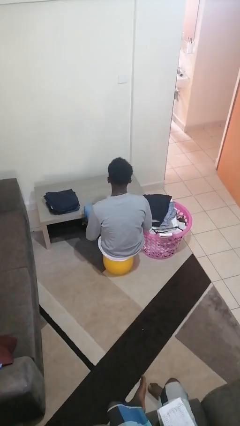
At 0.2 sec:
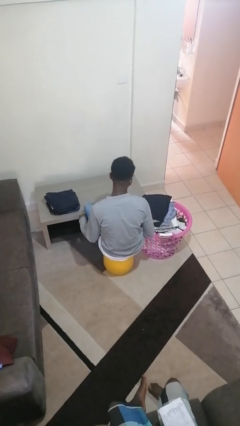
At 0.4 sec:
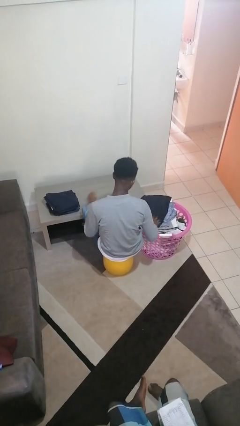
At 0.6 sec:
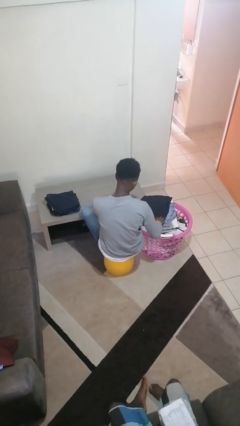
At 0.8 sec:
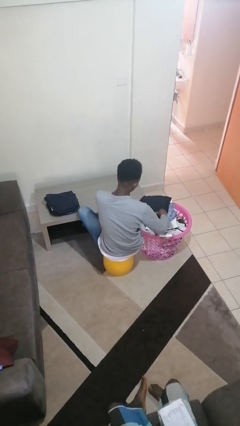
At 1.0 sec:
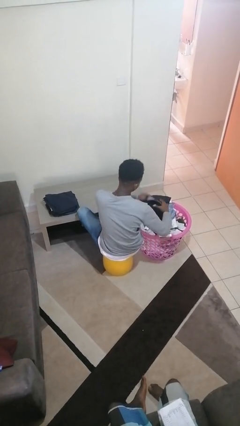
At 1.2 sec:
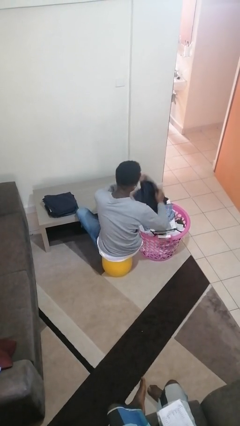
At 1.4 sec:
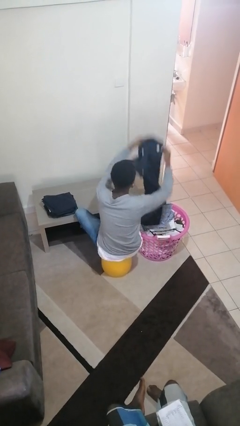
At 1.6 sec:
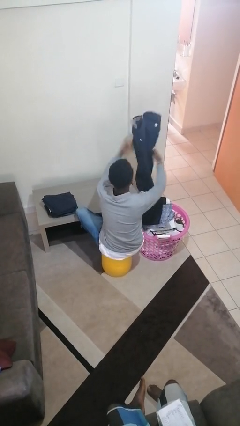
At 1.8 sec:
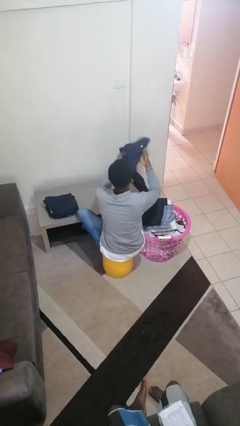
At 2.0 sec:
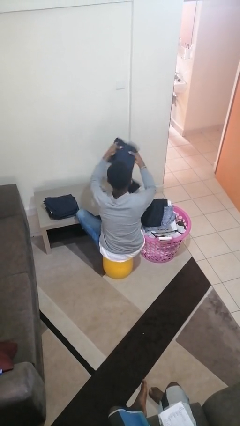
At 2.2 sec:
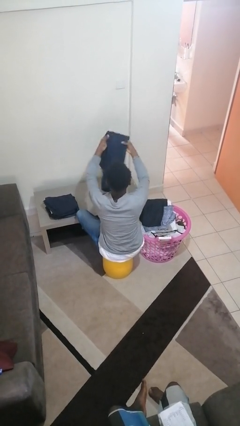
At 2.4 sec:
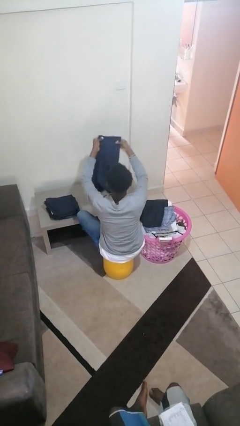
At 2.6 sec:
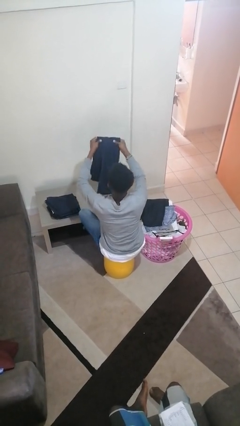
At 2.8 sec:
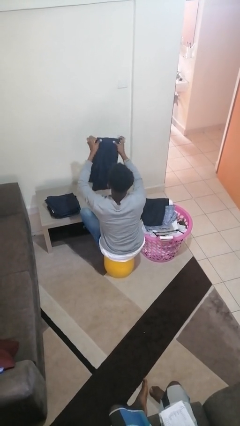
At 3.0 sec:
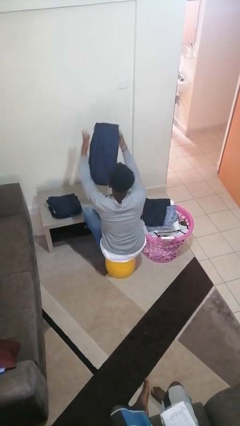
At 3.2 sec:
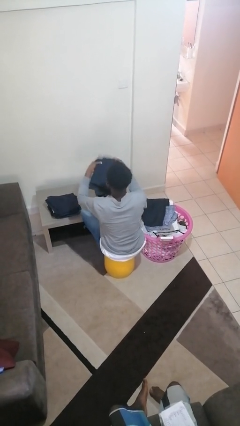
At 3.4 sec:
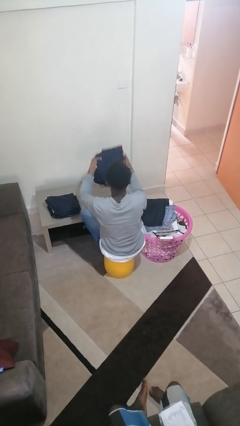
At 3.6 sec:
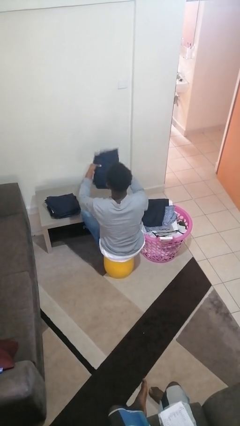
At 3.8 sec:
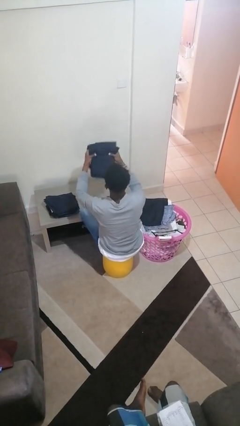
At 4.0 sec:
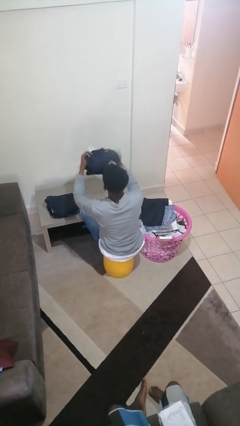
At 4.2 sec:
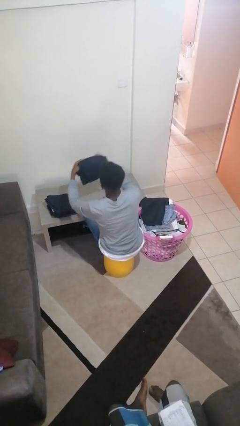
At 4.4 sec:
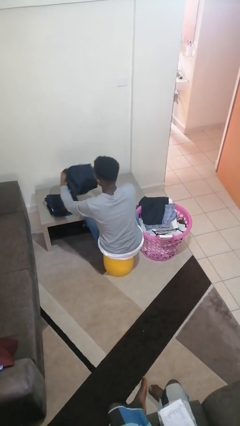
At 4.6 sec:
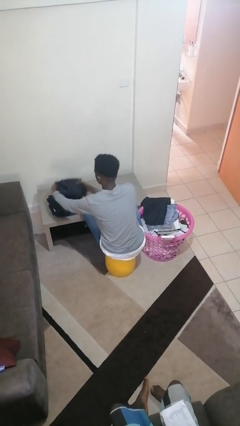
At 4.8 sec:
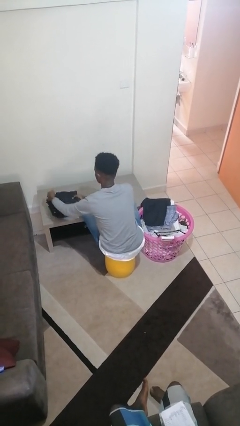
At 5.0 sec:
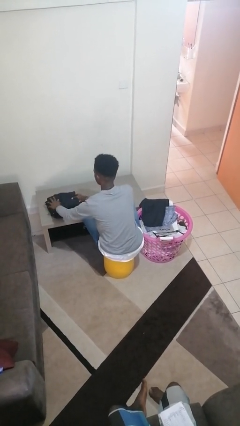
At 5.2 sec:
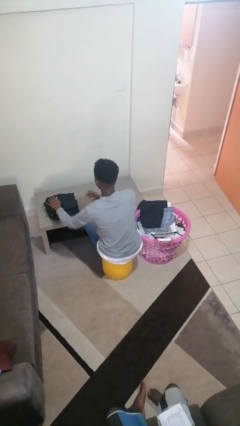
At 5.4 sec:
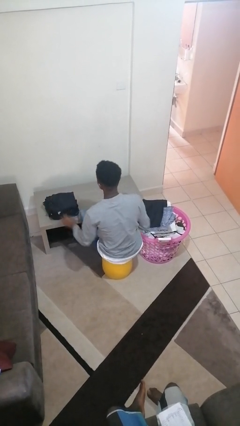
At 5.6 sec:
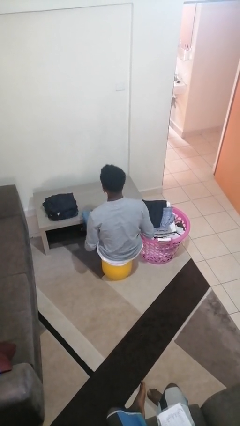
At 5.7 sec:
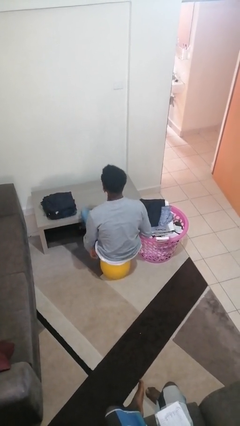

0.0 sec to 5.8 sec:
person folds pants

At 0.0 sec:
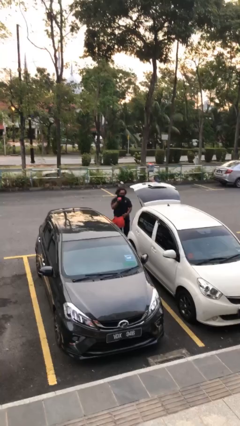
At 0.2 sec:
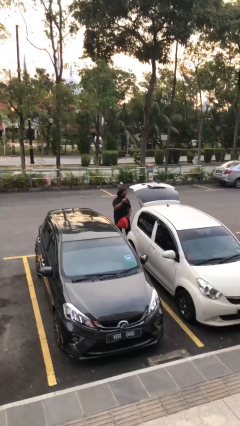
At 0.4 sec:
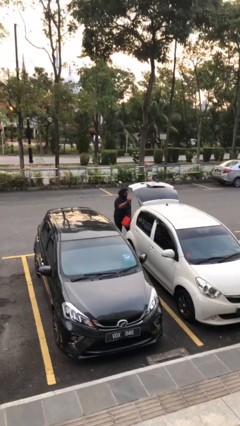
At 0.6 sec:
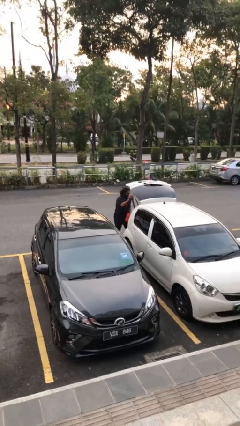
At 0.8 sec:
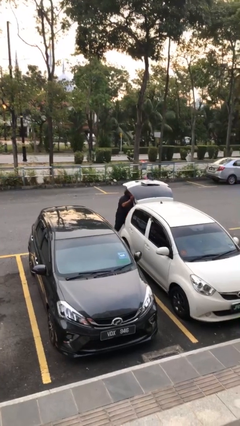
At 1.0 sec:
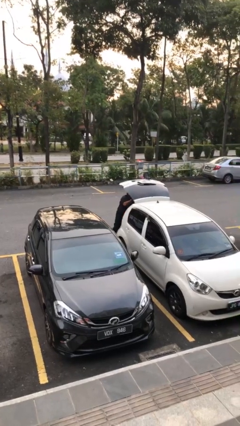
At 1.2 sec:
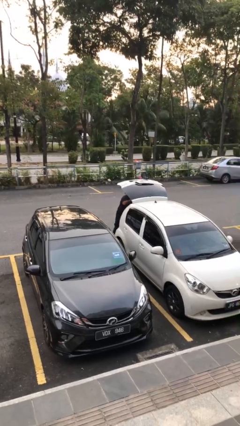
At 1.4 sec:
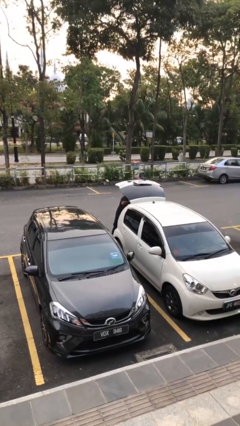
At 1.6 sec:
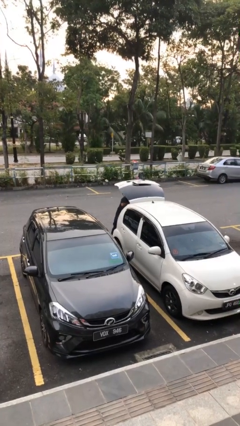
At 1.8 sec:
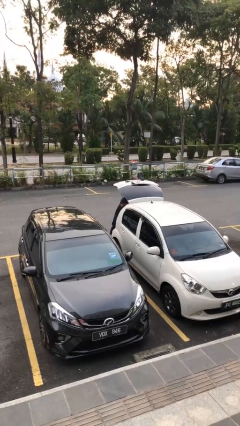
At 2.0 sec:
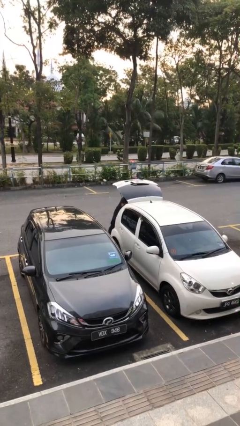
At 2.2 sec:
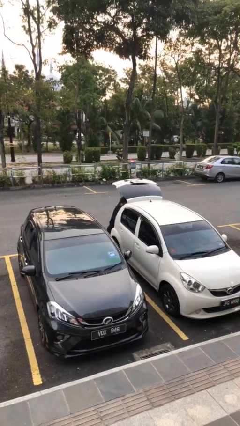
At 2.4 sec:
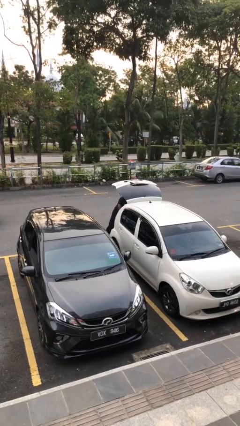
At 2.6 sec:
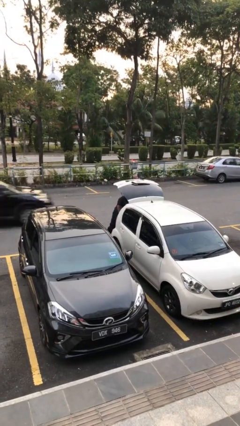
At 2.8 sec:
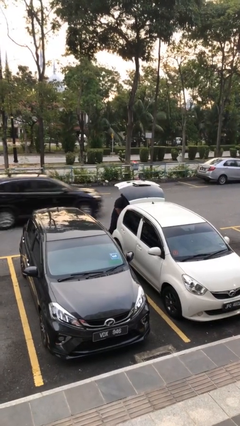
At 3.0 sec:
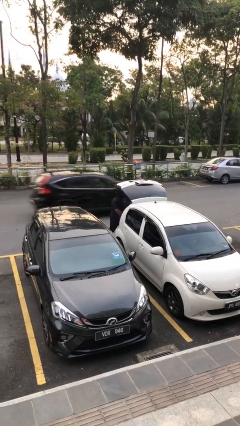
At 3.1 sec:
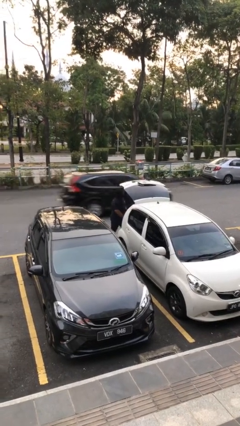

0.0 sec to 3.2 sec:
person loads car

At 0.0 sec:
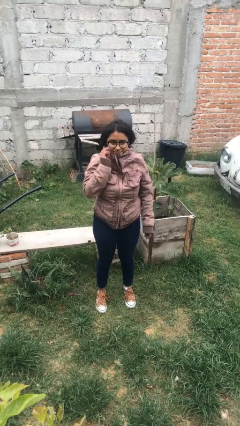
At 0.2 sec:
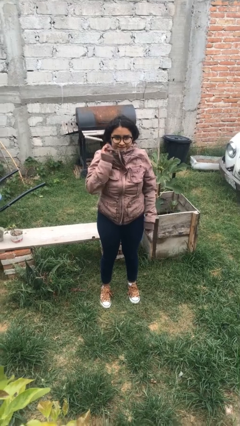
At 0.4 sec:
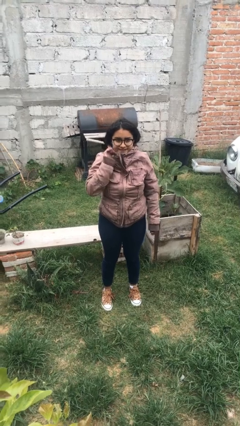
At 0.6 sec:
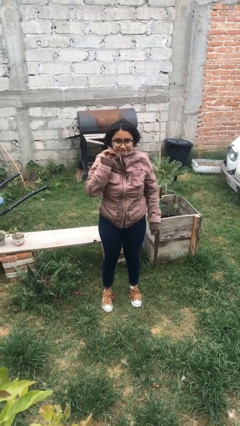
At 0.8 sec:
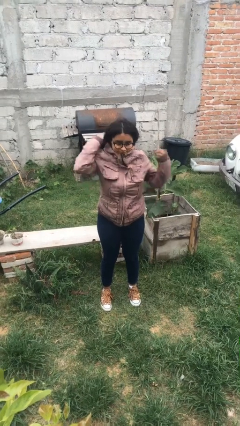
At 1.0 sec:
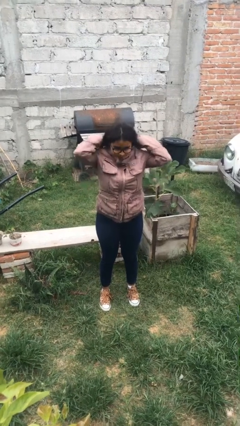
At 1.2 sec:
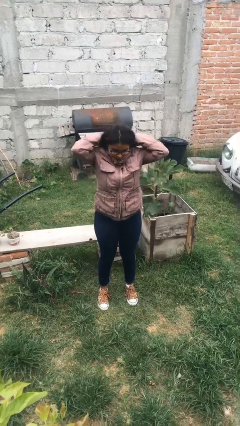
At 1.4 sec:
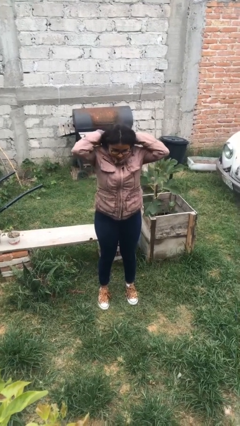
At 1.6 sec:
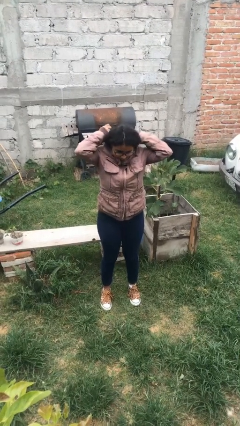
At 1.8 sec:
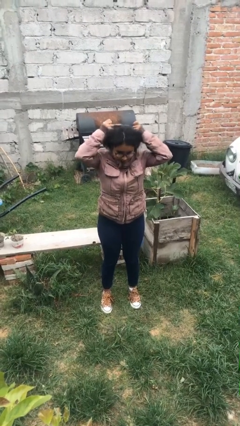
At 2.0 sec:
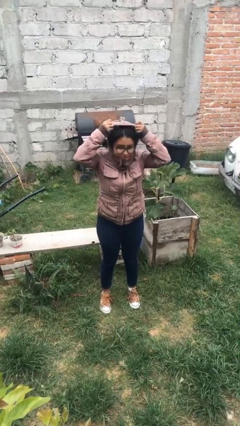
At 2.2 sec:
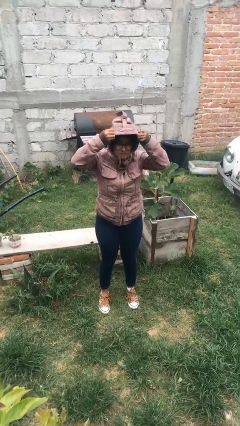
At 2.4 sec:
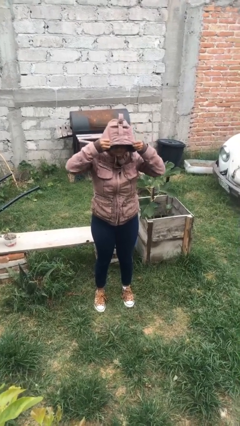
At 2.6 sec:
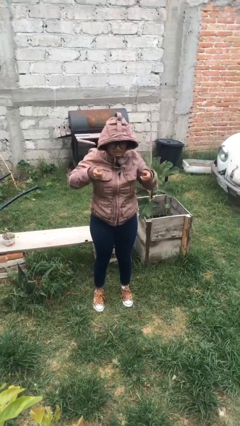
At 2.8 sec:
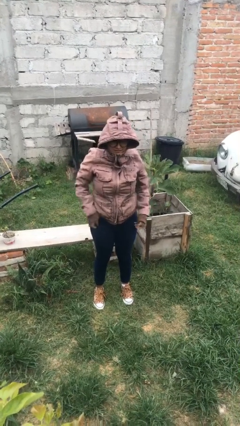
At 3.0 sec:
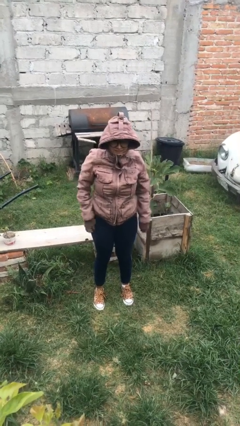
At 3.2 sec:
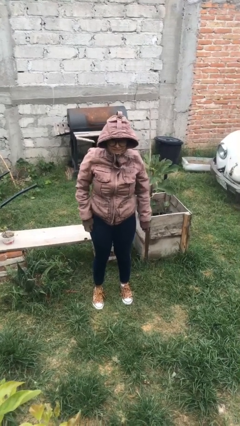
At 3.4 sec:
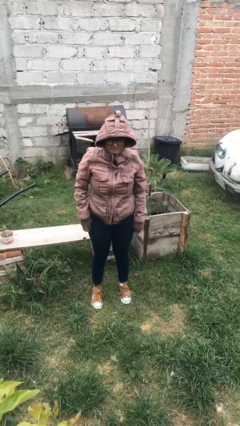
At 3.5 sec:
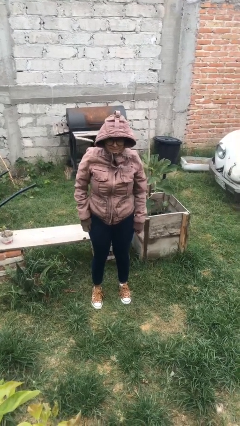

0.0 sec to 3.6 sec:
person puts on hoodie

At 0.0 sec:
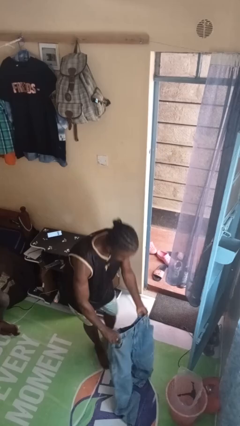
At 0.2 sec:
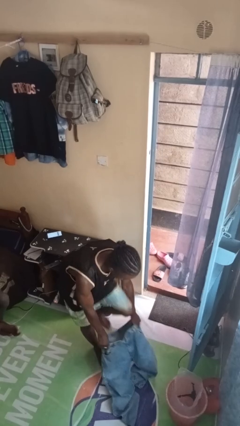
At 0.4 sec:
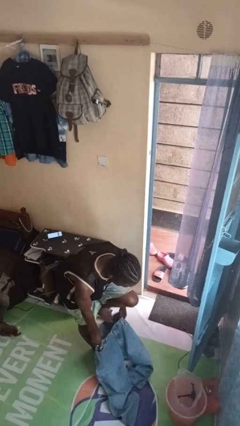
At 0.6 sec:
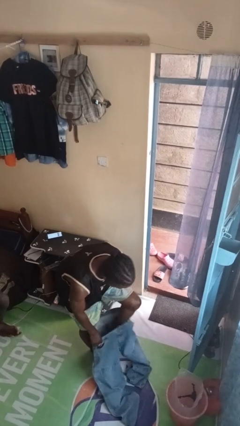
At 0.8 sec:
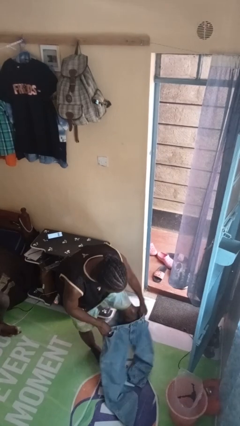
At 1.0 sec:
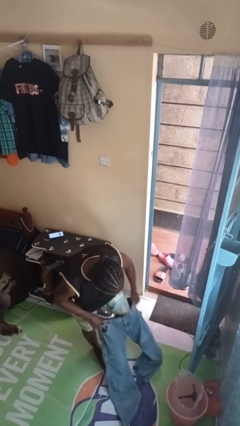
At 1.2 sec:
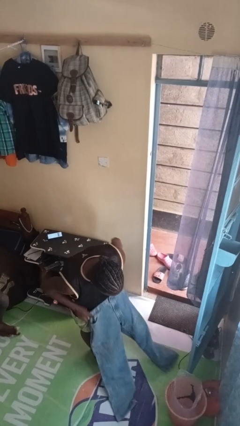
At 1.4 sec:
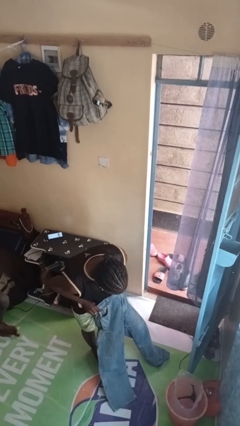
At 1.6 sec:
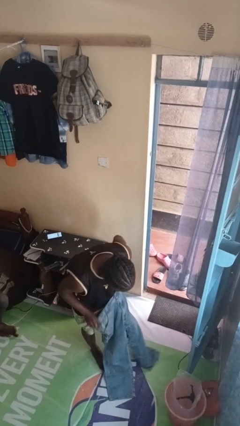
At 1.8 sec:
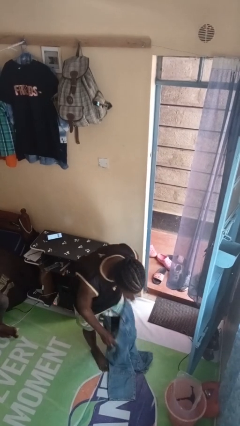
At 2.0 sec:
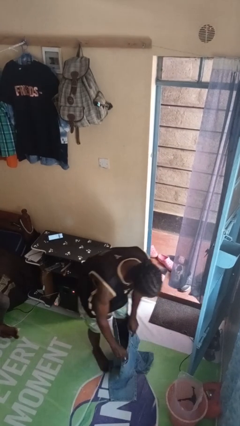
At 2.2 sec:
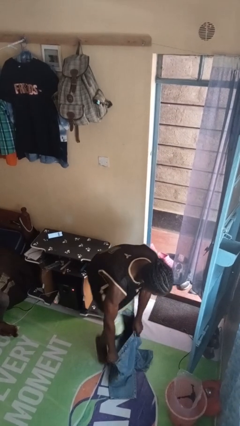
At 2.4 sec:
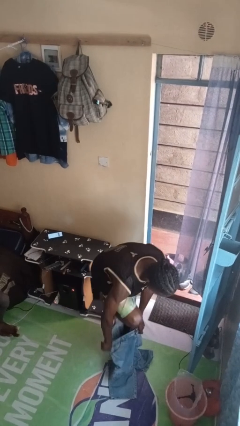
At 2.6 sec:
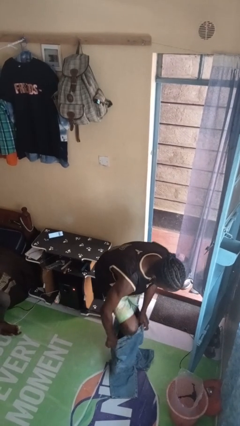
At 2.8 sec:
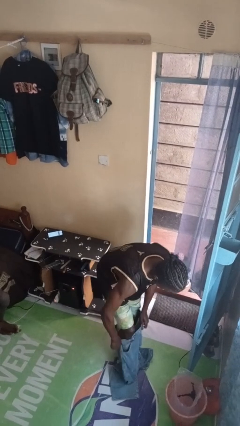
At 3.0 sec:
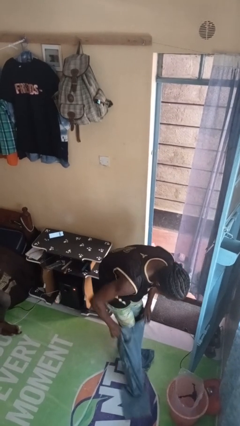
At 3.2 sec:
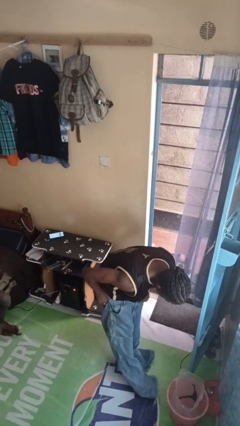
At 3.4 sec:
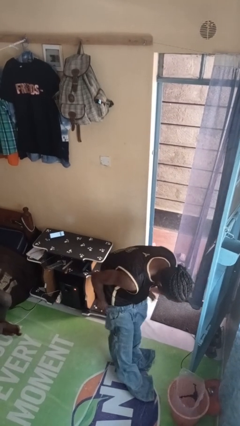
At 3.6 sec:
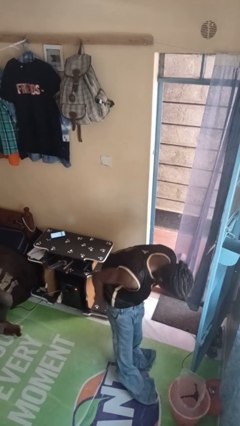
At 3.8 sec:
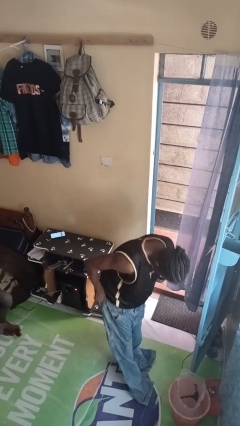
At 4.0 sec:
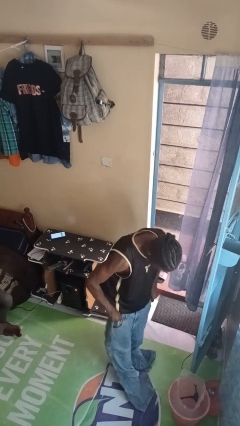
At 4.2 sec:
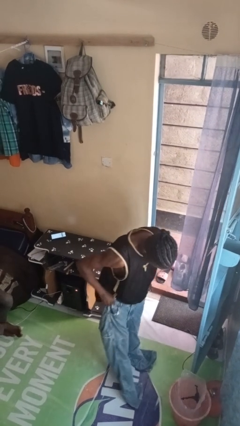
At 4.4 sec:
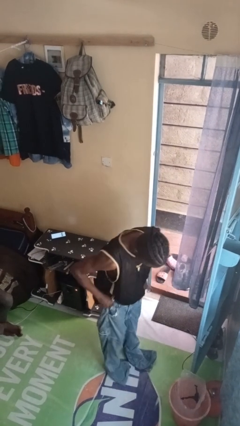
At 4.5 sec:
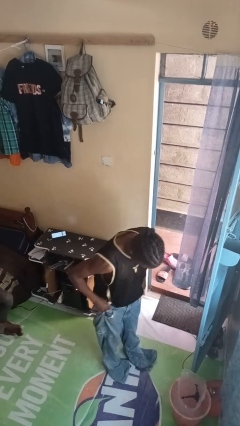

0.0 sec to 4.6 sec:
person puts on pants

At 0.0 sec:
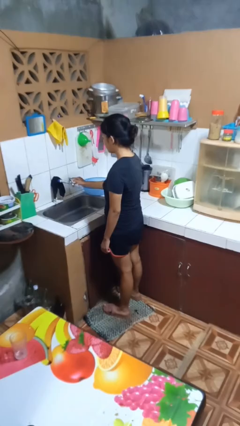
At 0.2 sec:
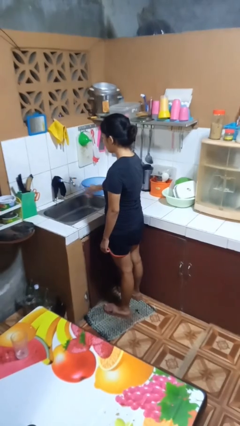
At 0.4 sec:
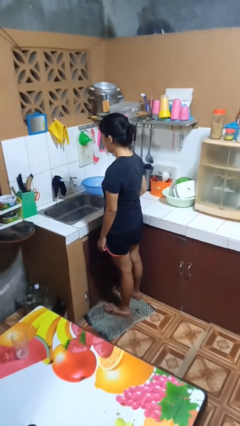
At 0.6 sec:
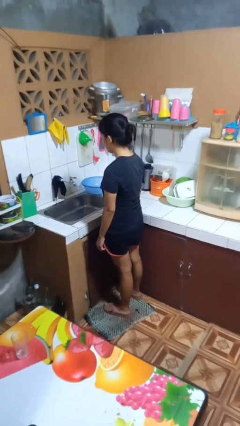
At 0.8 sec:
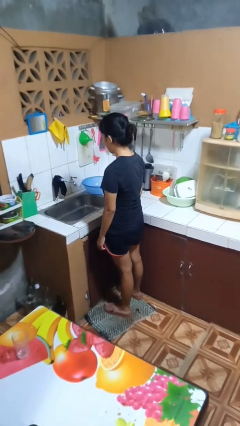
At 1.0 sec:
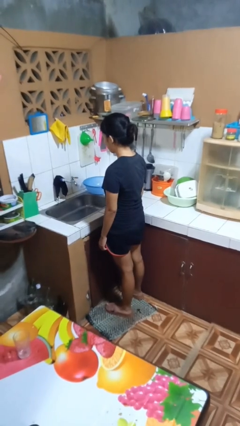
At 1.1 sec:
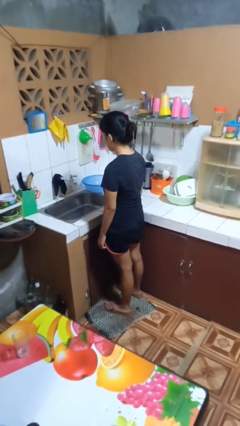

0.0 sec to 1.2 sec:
person turns off faucet
